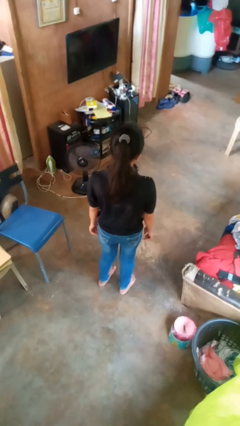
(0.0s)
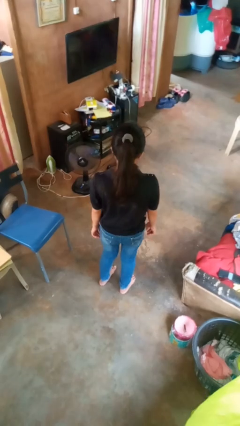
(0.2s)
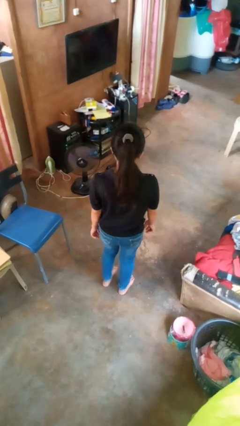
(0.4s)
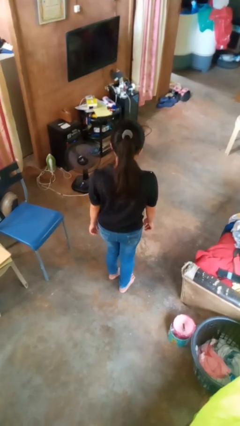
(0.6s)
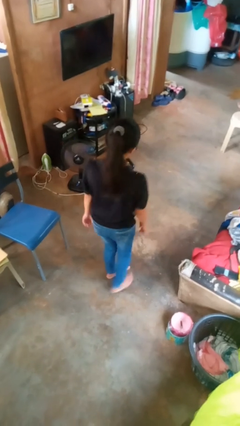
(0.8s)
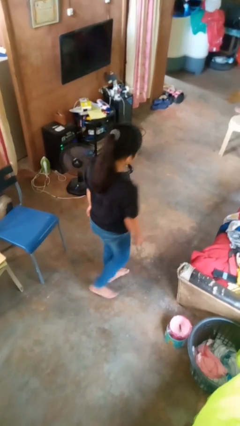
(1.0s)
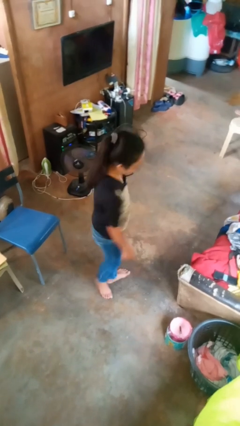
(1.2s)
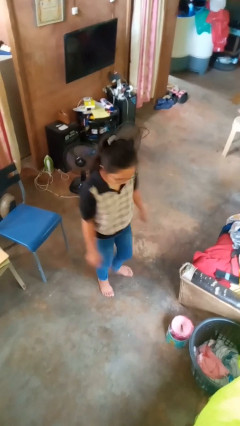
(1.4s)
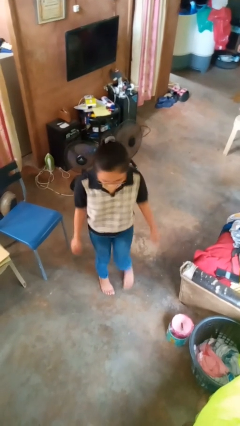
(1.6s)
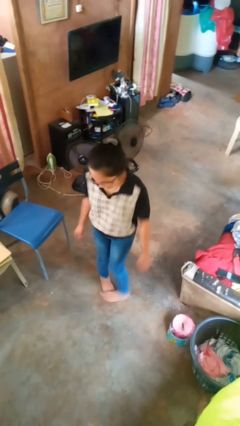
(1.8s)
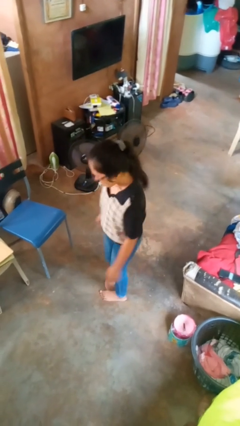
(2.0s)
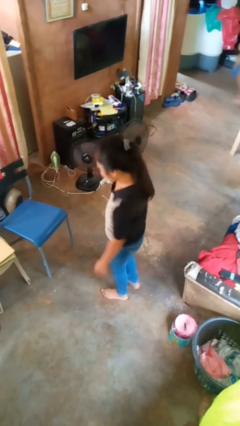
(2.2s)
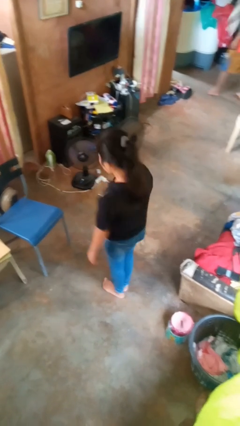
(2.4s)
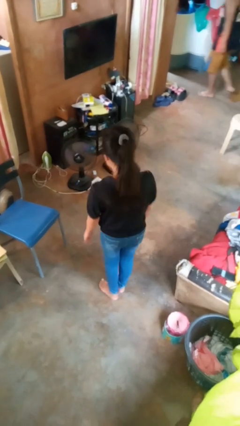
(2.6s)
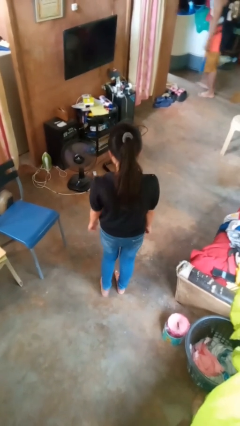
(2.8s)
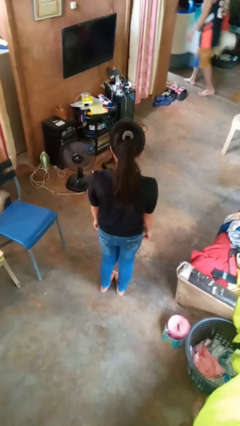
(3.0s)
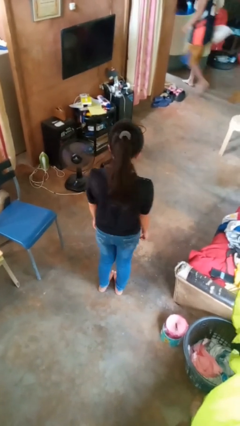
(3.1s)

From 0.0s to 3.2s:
person twirls

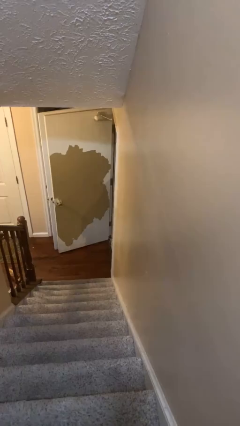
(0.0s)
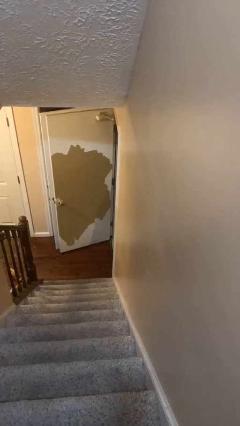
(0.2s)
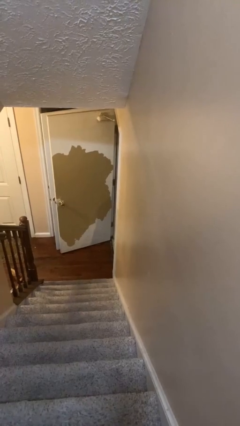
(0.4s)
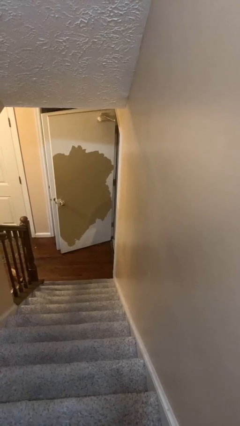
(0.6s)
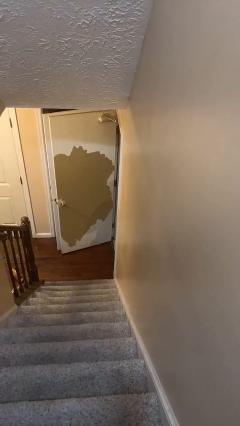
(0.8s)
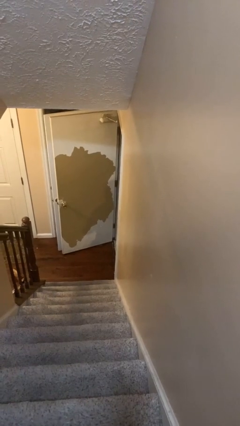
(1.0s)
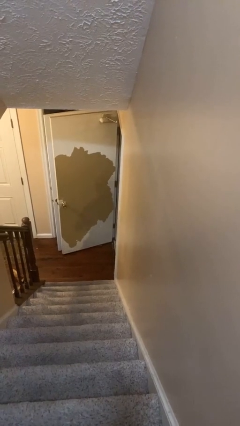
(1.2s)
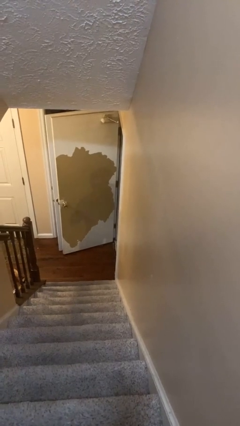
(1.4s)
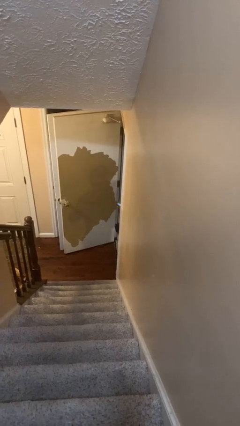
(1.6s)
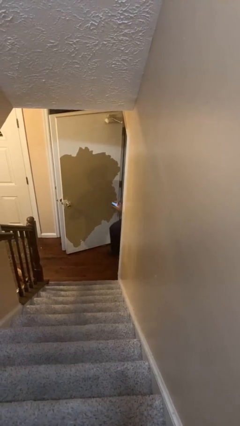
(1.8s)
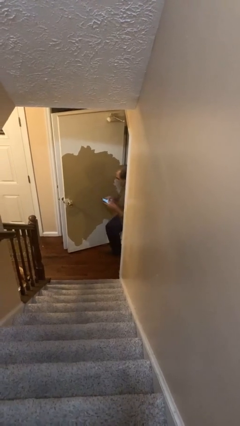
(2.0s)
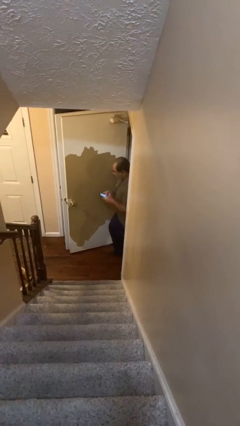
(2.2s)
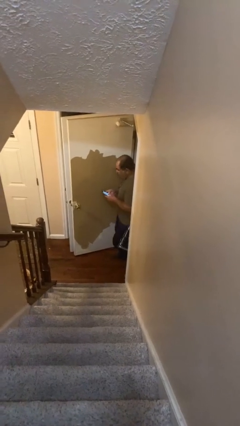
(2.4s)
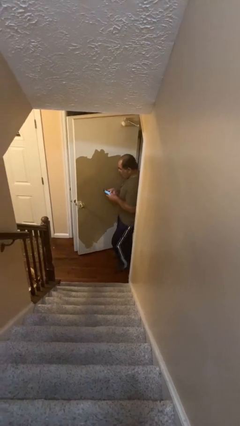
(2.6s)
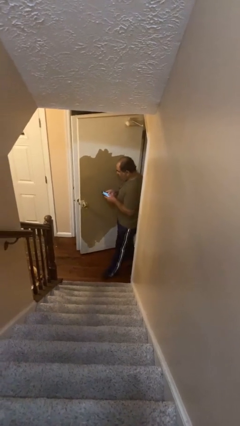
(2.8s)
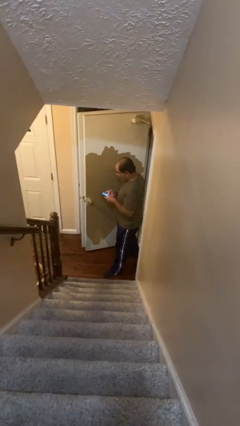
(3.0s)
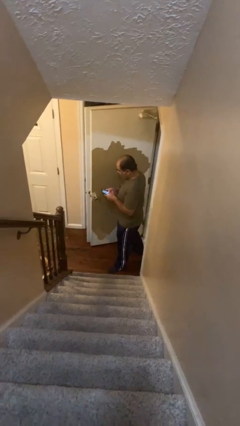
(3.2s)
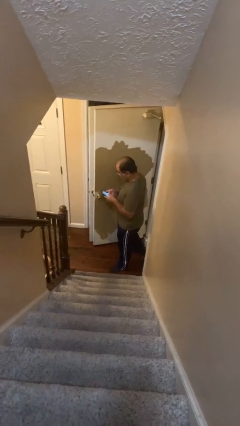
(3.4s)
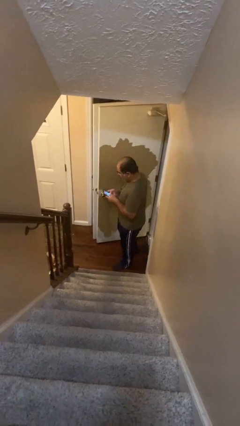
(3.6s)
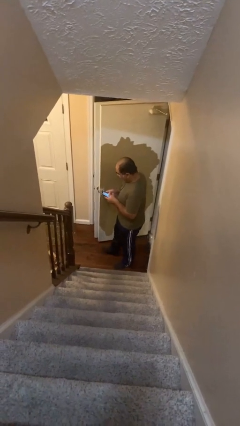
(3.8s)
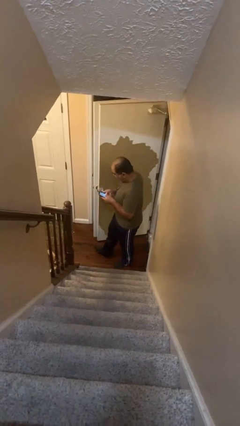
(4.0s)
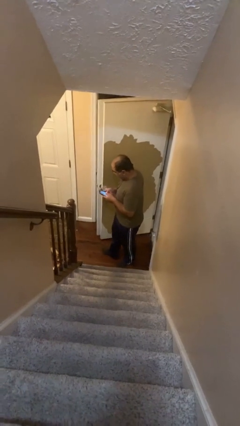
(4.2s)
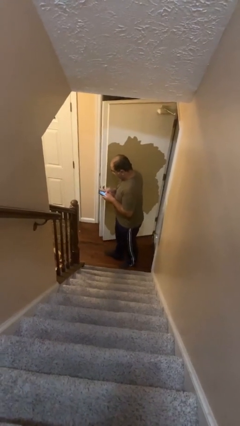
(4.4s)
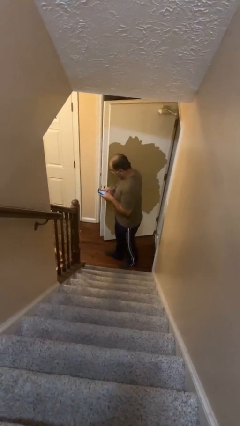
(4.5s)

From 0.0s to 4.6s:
person enters scene through structure

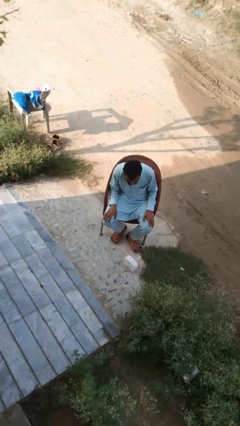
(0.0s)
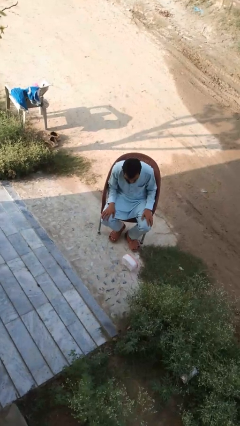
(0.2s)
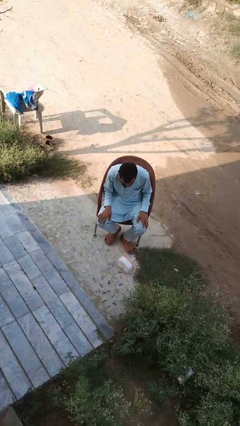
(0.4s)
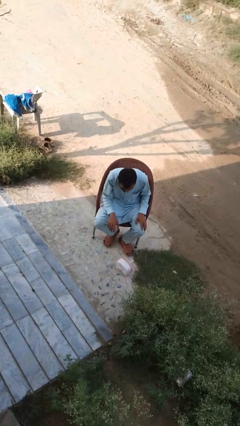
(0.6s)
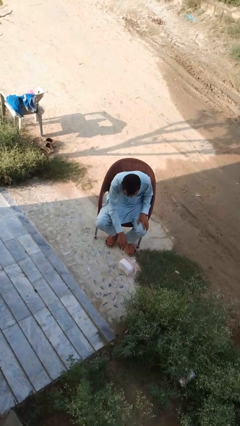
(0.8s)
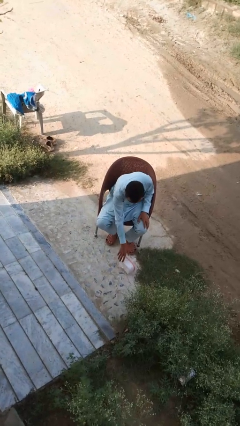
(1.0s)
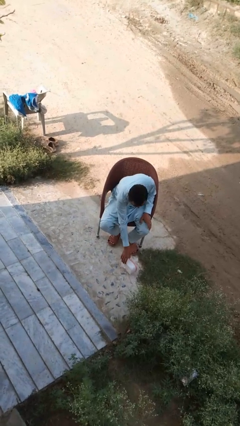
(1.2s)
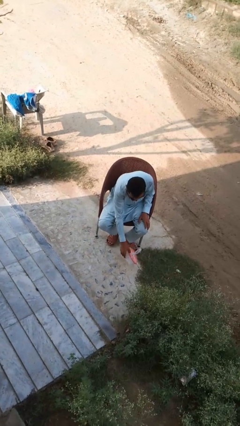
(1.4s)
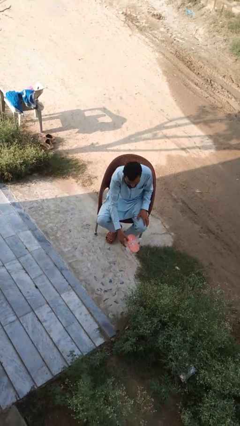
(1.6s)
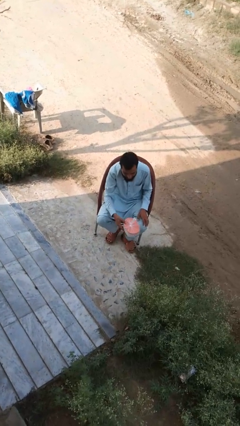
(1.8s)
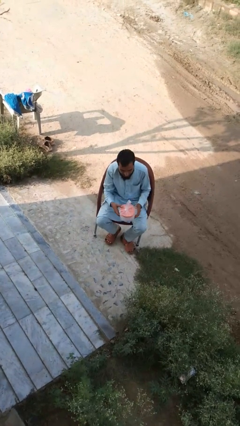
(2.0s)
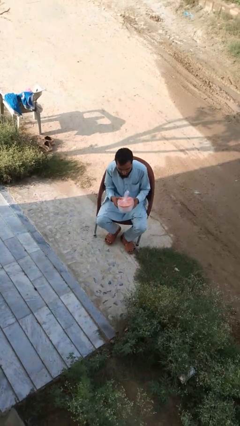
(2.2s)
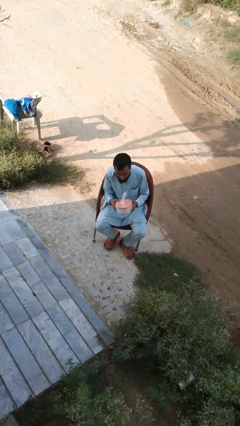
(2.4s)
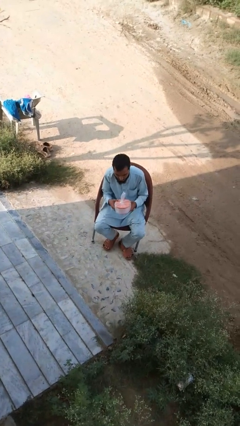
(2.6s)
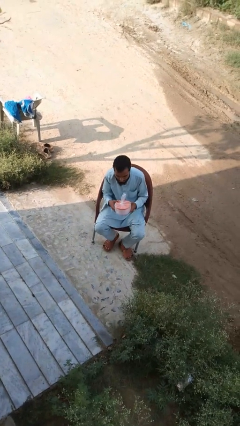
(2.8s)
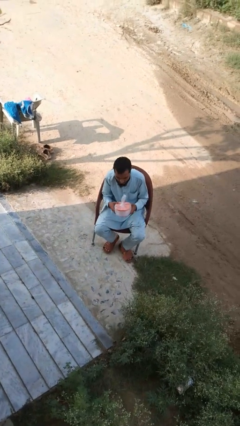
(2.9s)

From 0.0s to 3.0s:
person picks up object from floor

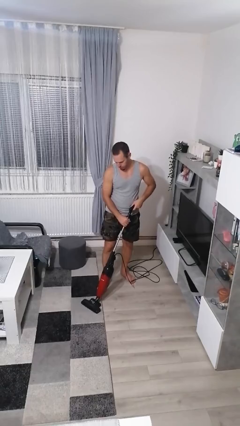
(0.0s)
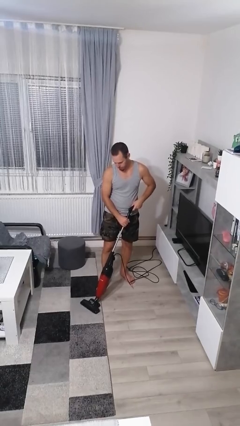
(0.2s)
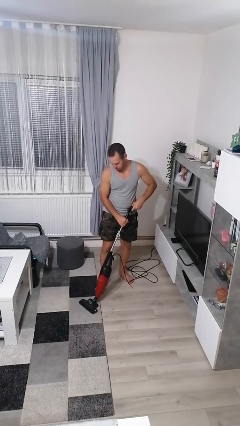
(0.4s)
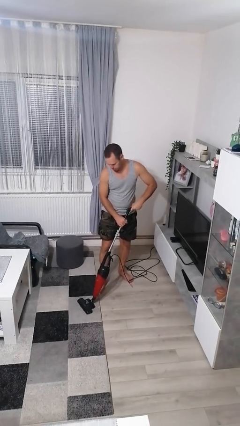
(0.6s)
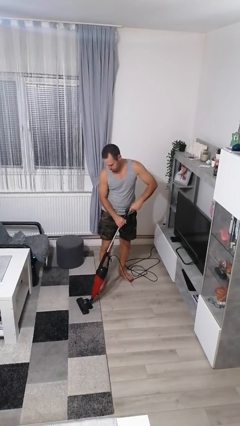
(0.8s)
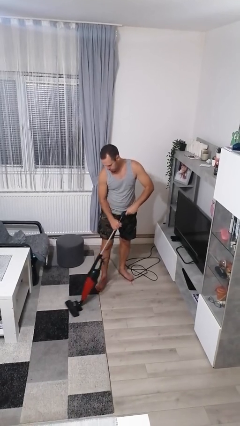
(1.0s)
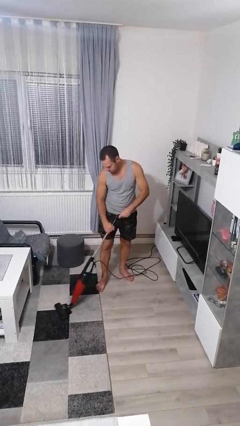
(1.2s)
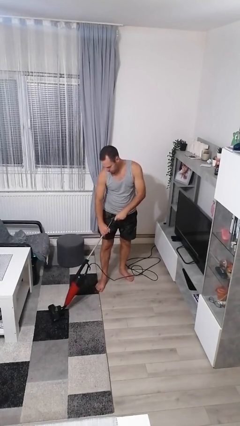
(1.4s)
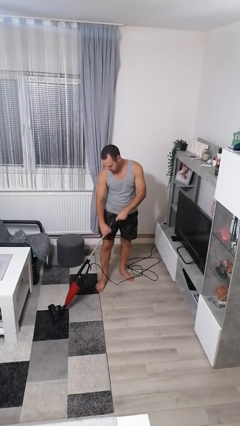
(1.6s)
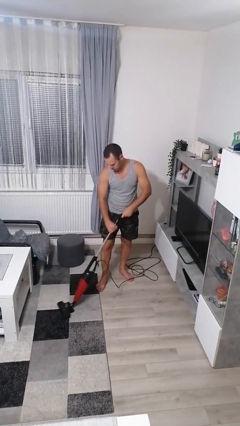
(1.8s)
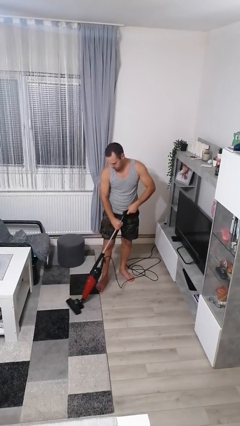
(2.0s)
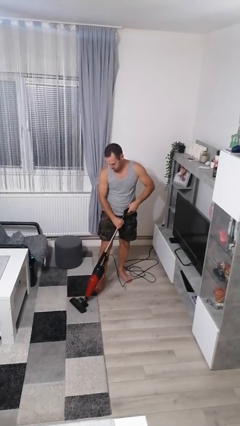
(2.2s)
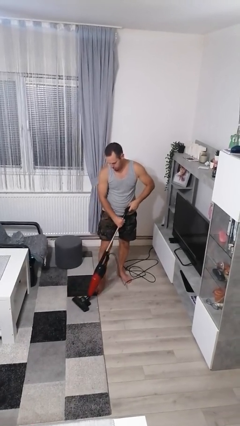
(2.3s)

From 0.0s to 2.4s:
person vacuums carpet

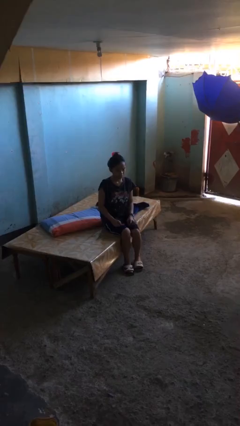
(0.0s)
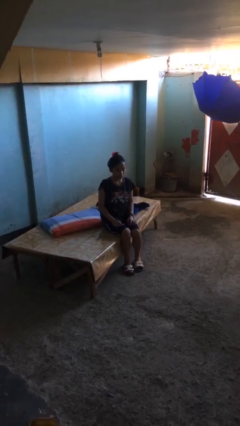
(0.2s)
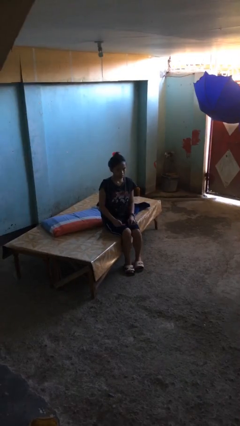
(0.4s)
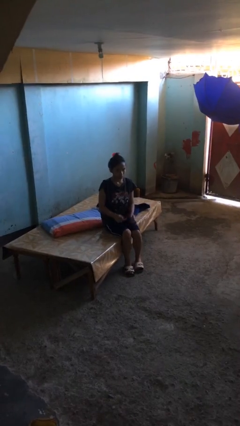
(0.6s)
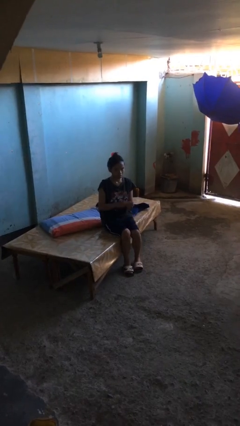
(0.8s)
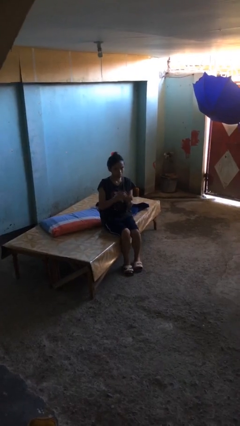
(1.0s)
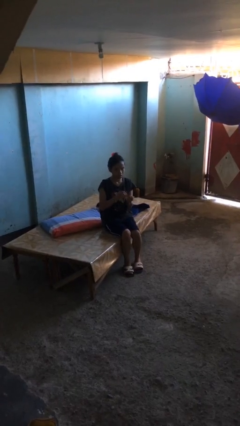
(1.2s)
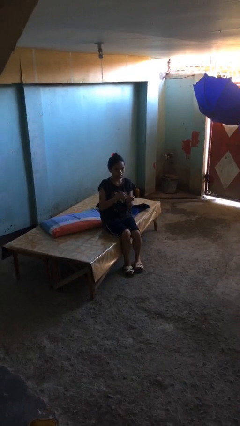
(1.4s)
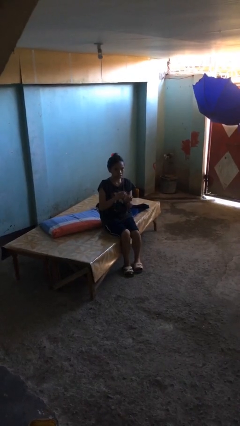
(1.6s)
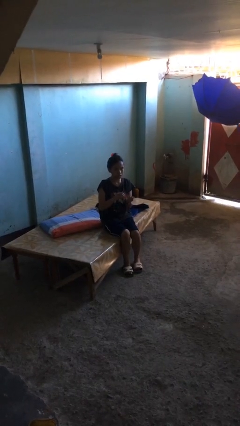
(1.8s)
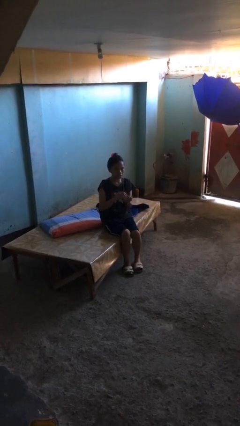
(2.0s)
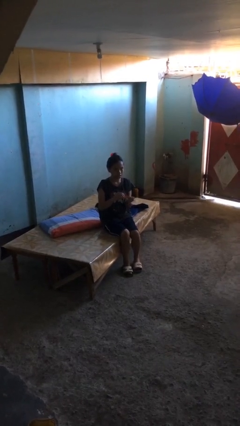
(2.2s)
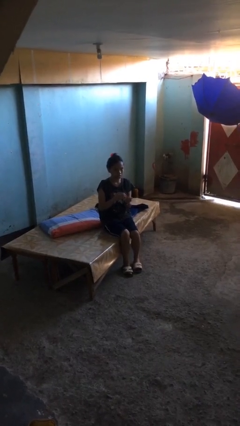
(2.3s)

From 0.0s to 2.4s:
person files fingernails

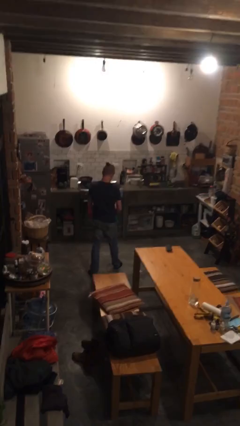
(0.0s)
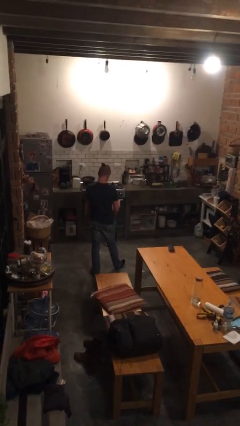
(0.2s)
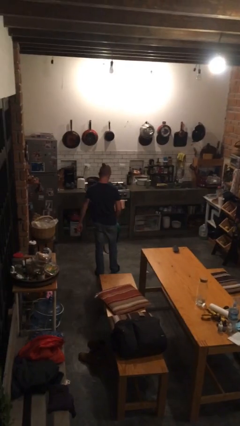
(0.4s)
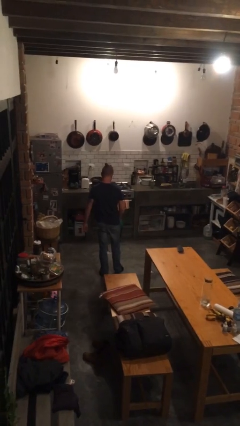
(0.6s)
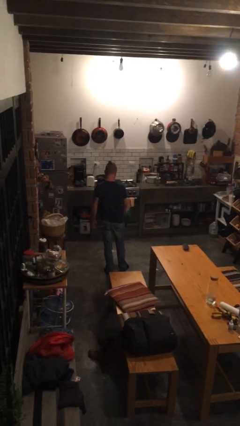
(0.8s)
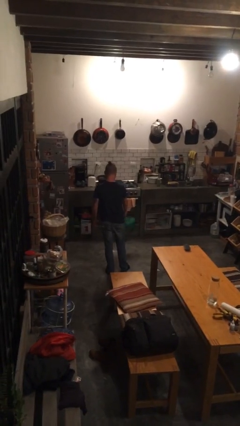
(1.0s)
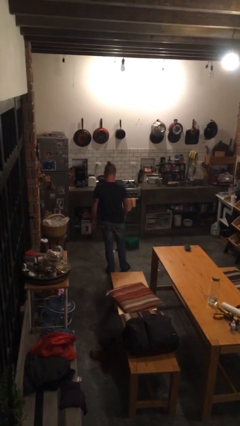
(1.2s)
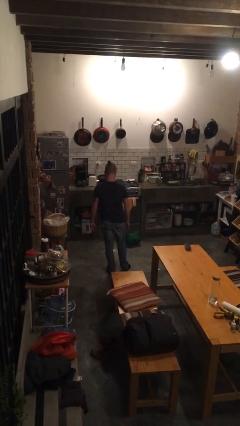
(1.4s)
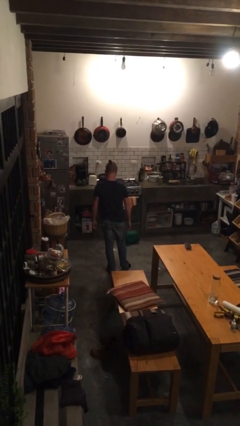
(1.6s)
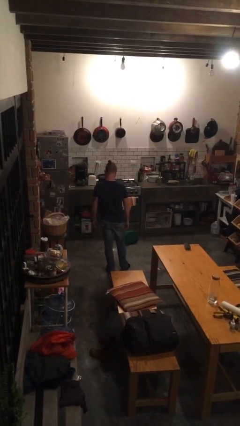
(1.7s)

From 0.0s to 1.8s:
person throws object to ground

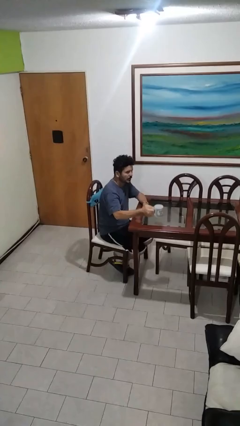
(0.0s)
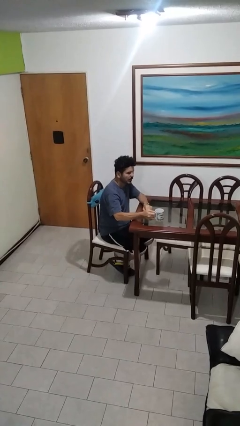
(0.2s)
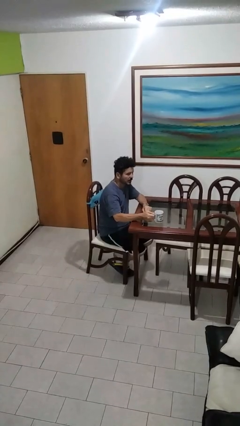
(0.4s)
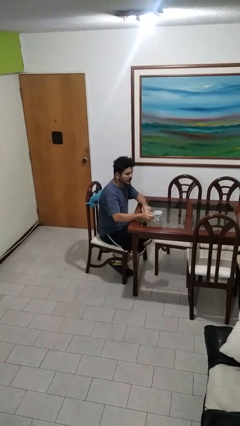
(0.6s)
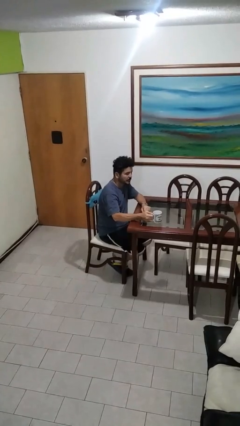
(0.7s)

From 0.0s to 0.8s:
person puts down object on table
